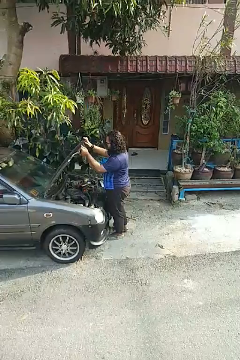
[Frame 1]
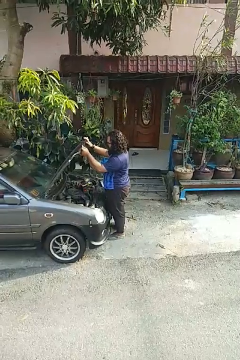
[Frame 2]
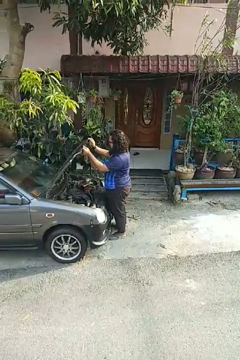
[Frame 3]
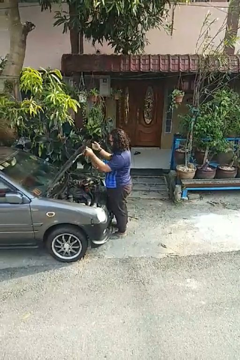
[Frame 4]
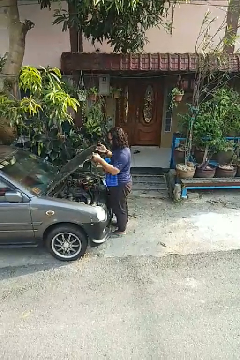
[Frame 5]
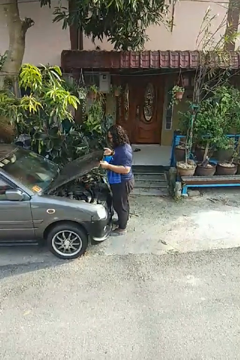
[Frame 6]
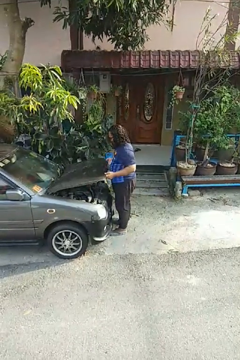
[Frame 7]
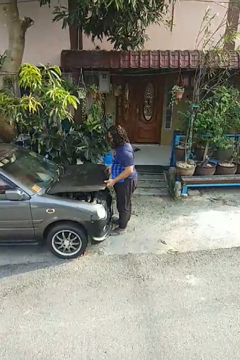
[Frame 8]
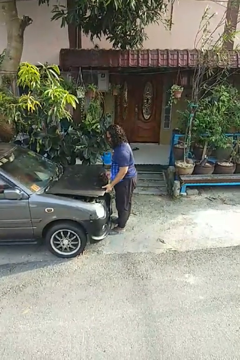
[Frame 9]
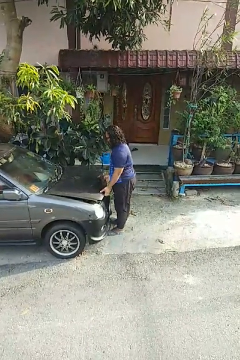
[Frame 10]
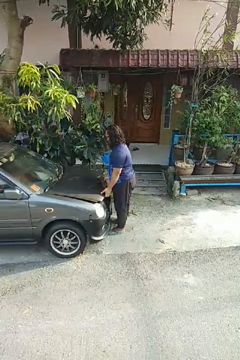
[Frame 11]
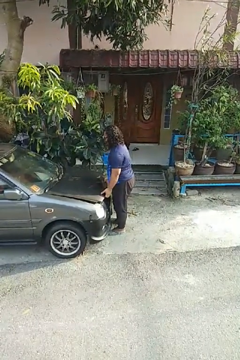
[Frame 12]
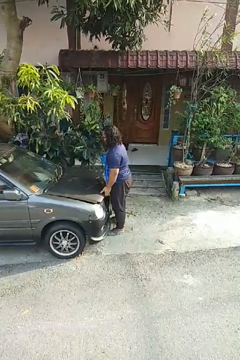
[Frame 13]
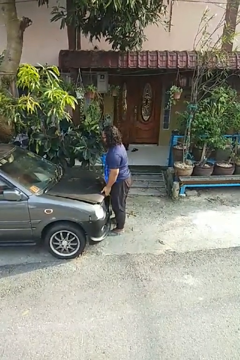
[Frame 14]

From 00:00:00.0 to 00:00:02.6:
person closes car hood

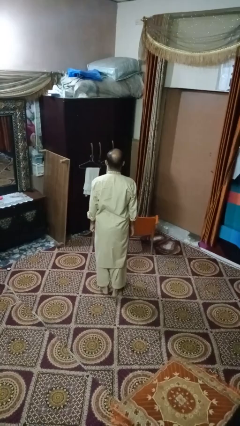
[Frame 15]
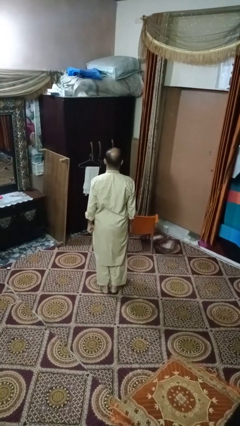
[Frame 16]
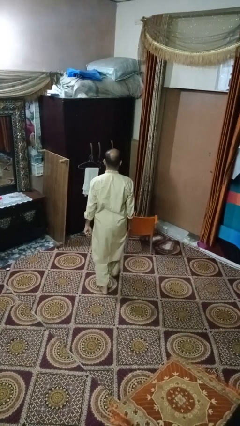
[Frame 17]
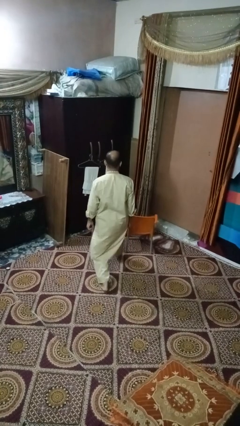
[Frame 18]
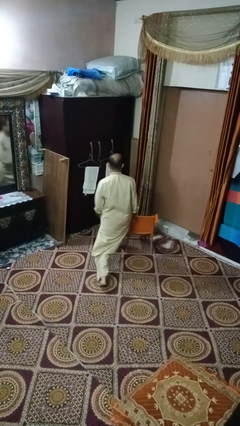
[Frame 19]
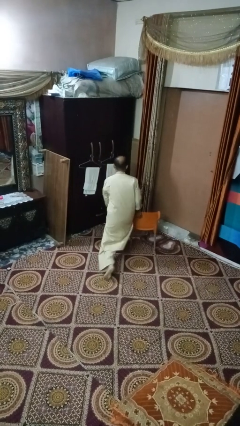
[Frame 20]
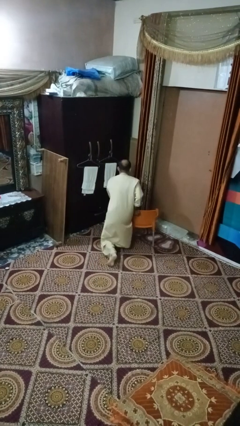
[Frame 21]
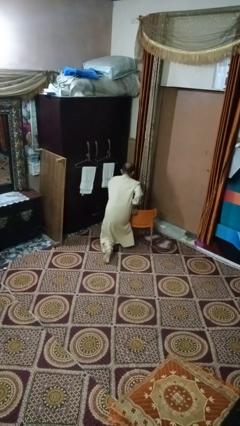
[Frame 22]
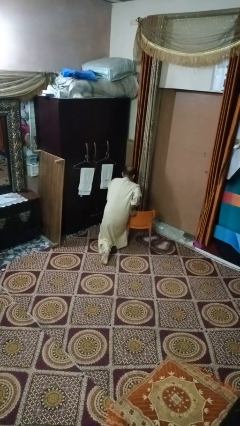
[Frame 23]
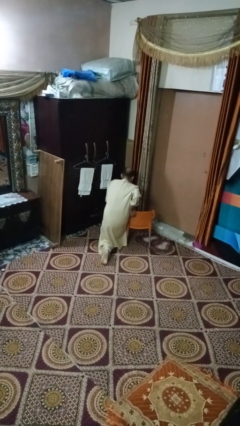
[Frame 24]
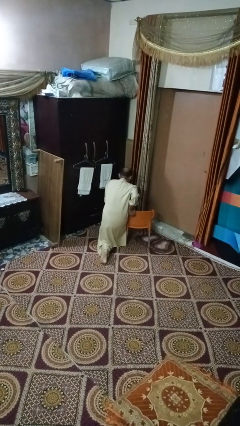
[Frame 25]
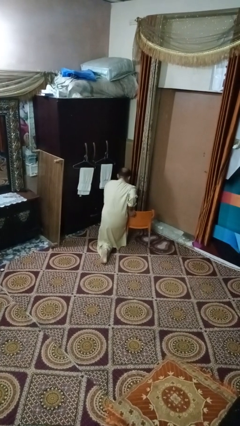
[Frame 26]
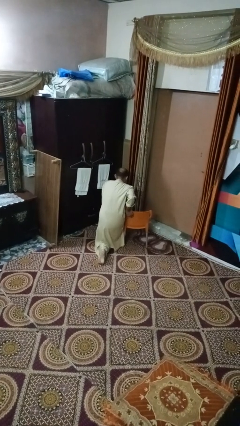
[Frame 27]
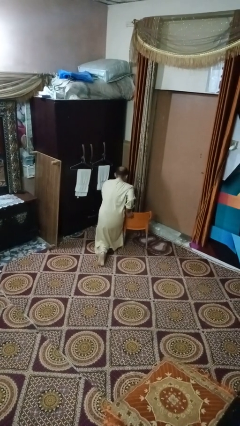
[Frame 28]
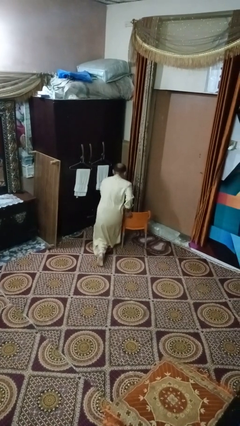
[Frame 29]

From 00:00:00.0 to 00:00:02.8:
person trips on object on floor

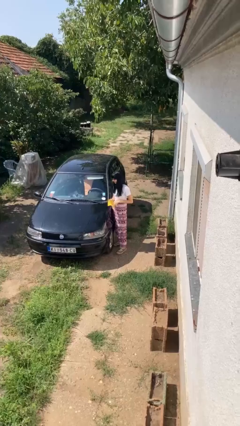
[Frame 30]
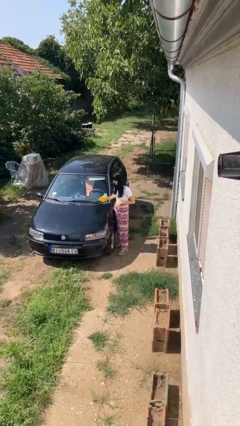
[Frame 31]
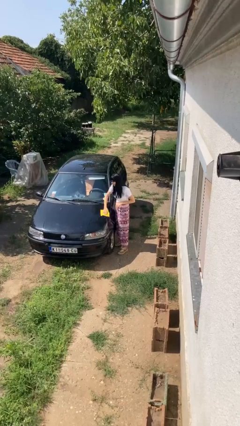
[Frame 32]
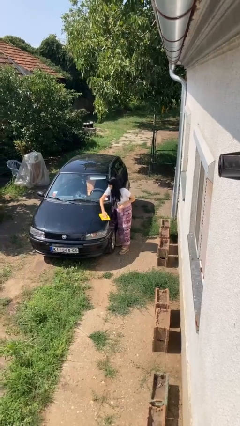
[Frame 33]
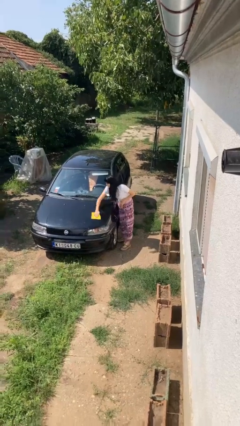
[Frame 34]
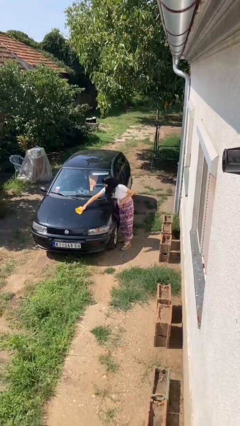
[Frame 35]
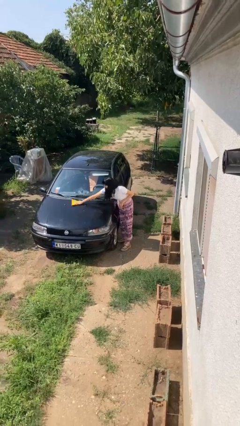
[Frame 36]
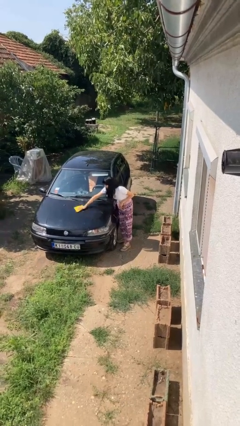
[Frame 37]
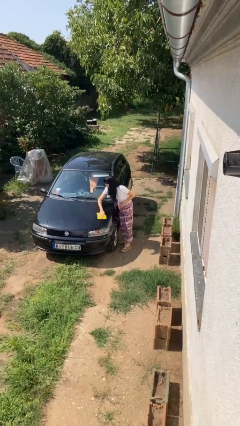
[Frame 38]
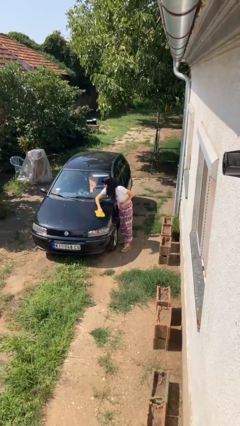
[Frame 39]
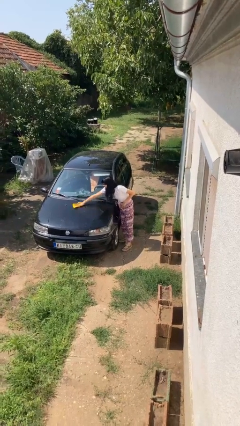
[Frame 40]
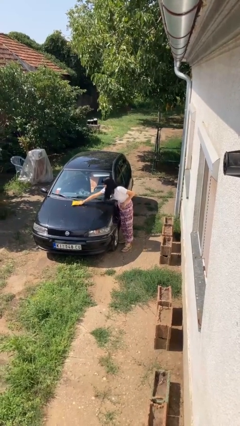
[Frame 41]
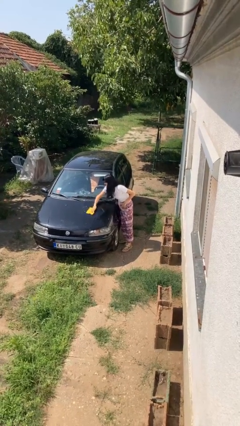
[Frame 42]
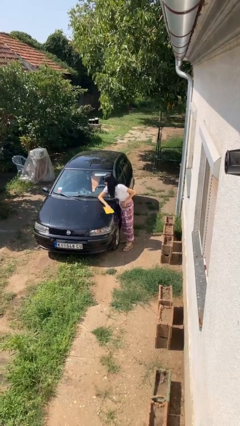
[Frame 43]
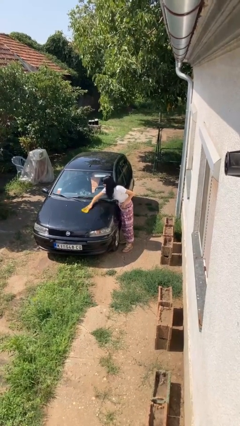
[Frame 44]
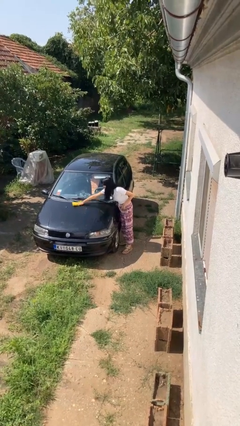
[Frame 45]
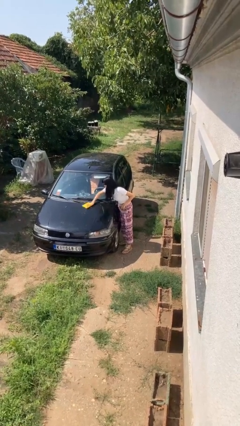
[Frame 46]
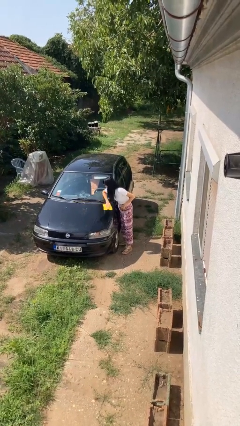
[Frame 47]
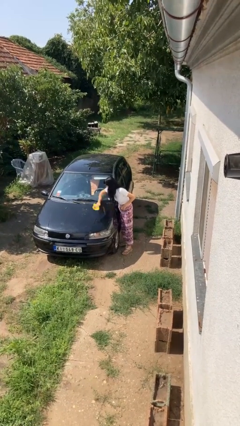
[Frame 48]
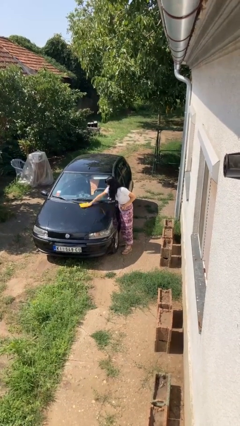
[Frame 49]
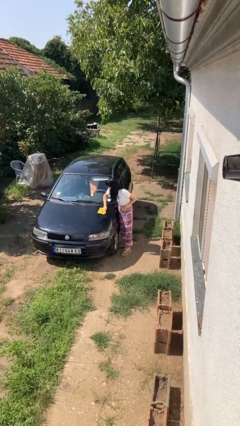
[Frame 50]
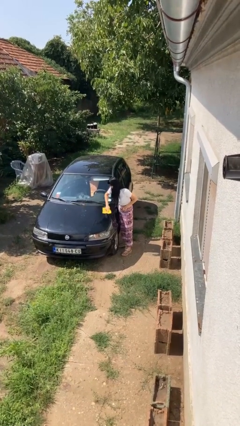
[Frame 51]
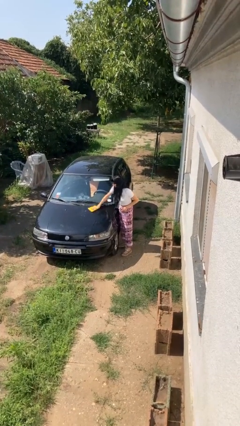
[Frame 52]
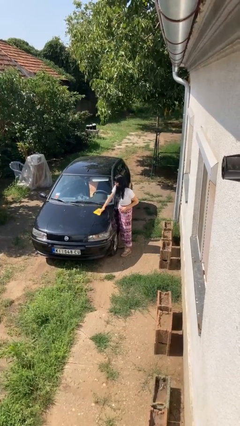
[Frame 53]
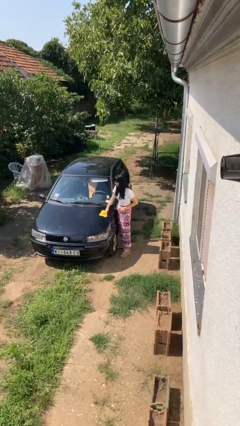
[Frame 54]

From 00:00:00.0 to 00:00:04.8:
person polishes car with rag

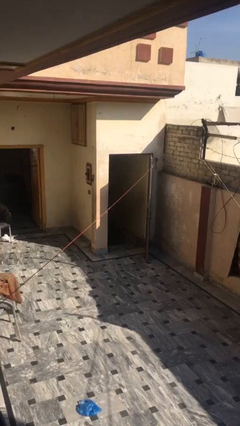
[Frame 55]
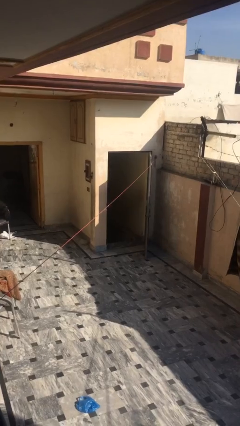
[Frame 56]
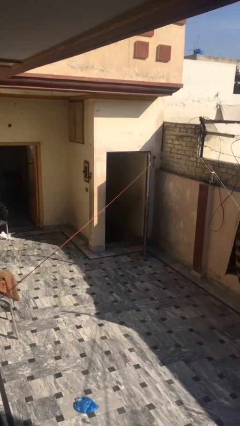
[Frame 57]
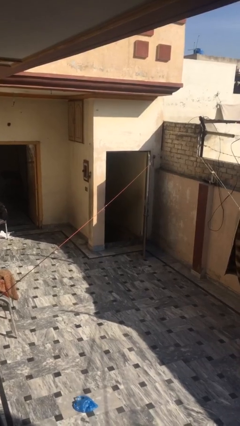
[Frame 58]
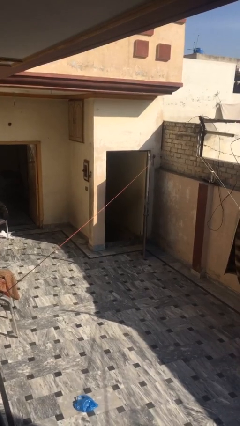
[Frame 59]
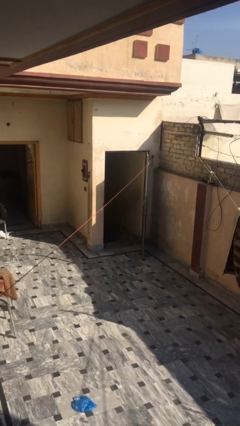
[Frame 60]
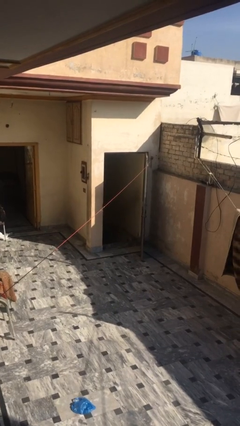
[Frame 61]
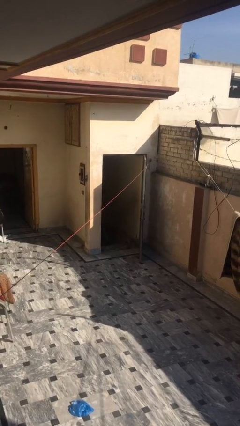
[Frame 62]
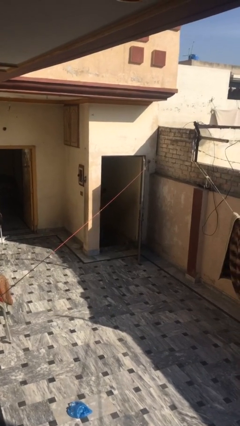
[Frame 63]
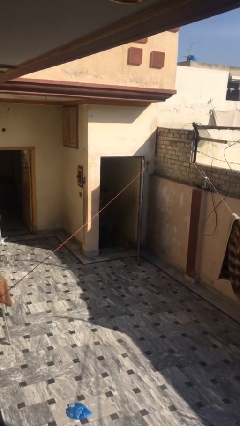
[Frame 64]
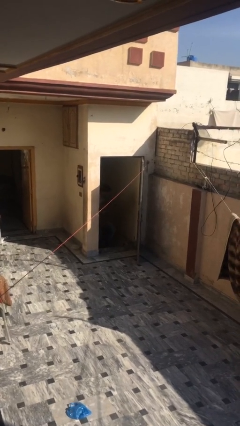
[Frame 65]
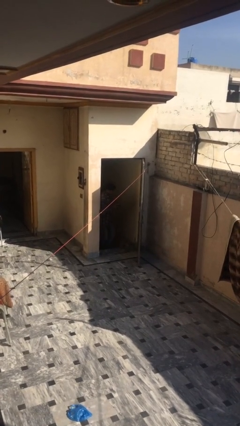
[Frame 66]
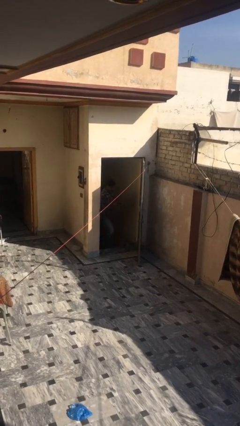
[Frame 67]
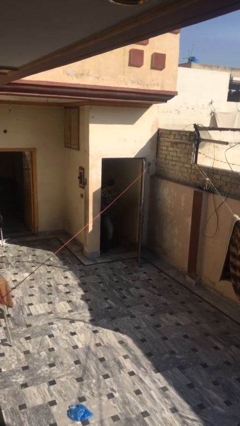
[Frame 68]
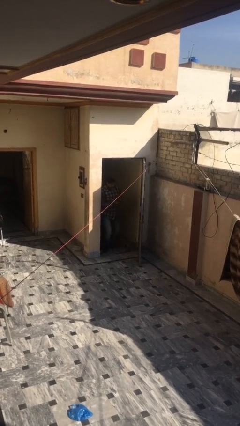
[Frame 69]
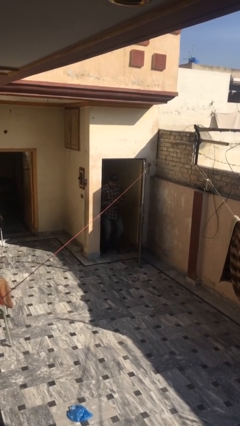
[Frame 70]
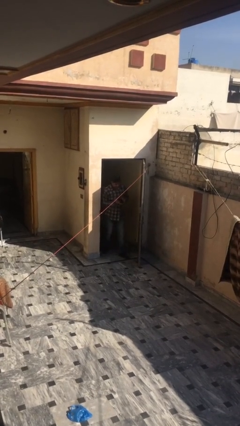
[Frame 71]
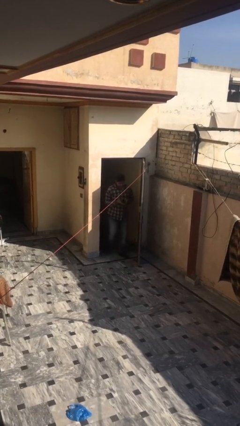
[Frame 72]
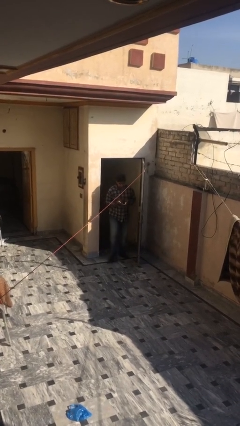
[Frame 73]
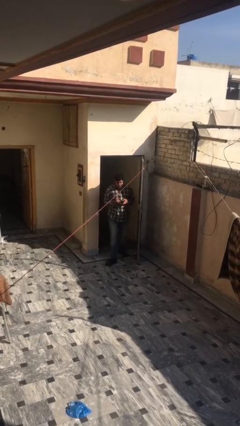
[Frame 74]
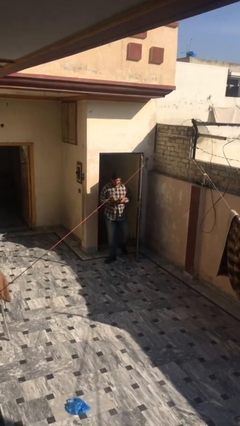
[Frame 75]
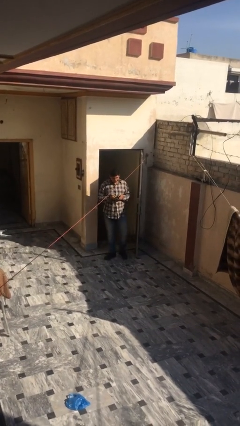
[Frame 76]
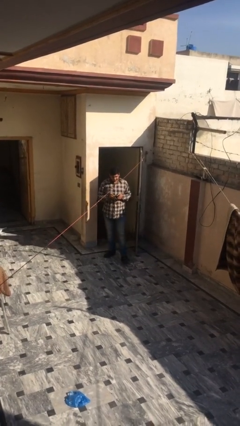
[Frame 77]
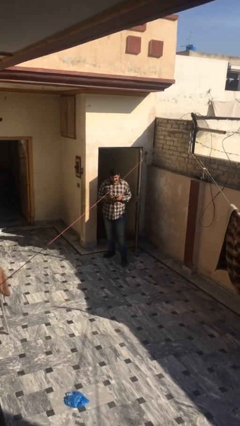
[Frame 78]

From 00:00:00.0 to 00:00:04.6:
person enters scene through structure

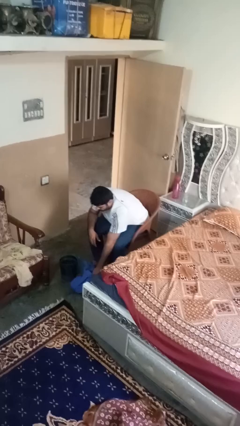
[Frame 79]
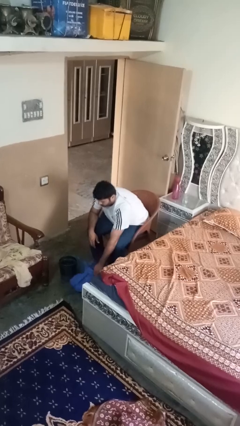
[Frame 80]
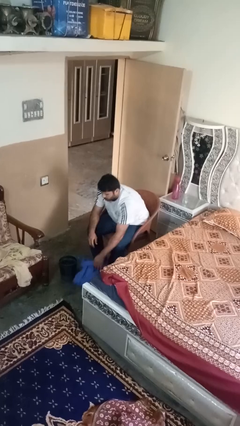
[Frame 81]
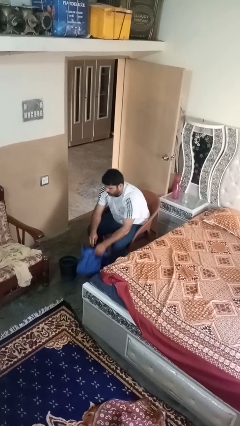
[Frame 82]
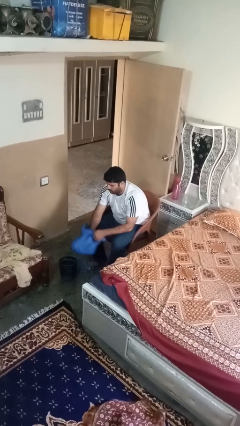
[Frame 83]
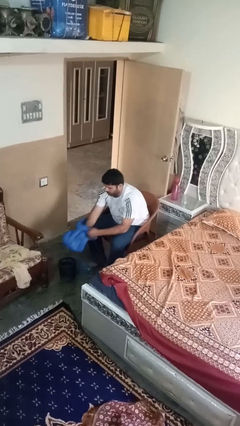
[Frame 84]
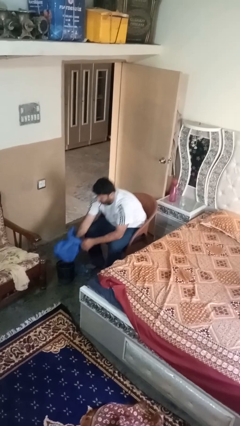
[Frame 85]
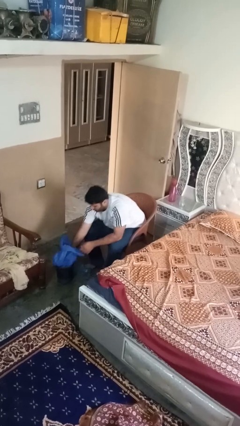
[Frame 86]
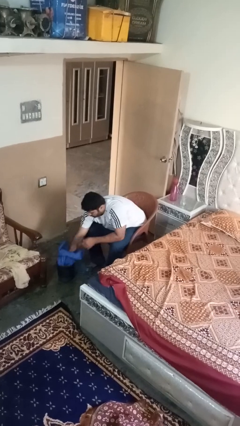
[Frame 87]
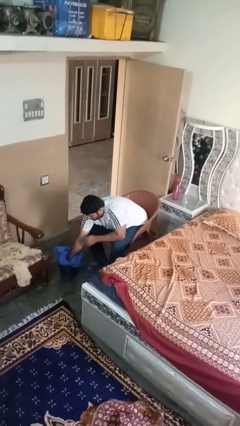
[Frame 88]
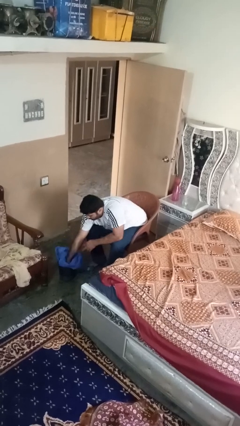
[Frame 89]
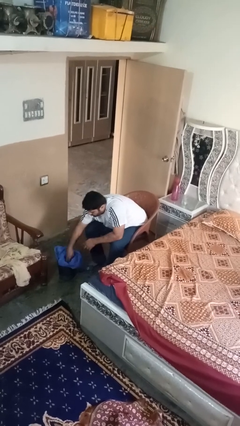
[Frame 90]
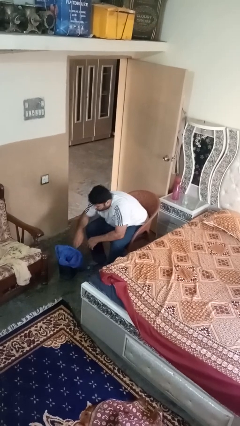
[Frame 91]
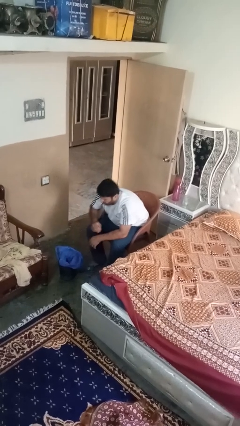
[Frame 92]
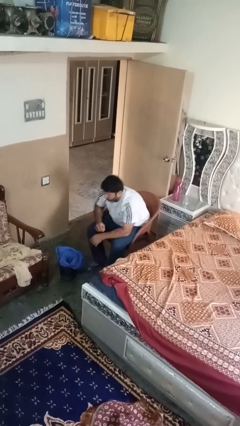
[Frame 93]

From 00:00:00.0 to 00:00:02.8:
person inserts trashbag into trashcan

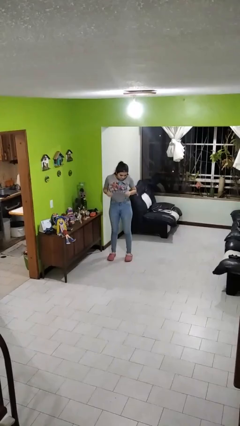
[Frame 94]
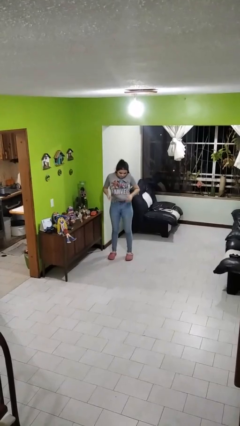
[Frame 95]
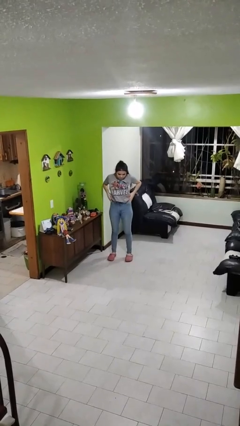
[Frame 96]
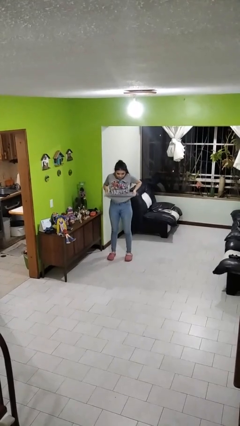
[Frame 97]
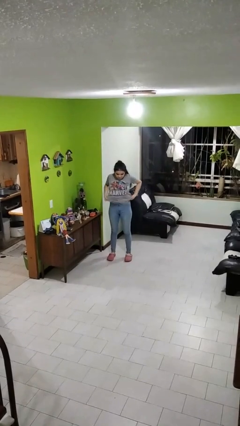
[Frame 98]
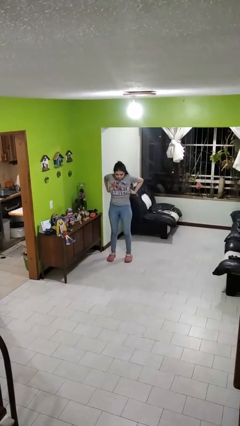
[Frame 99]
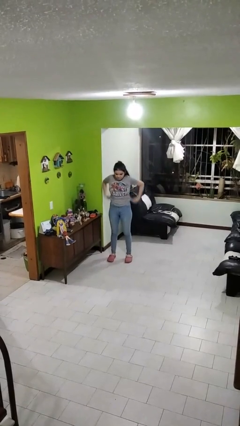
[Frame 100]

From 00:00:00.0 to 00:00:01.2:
person untucks shirt
